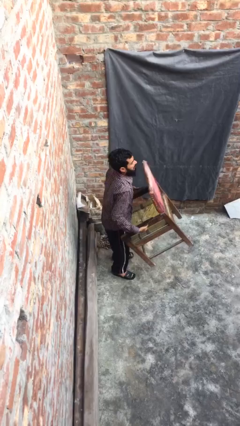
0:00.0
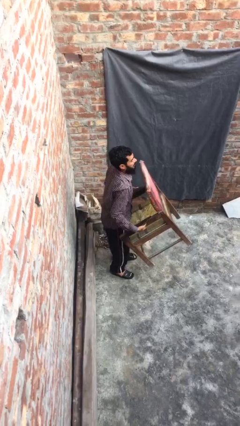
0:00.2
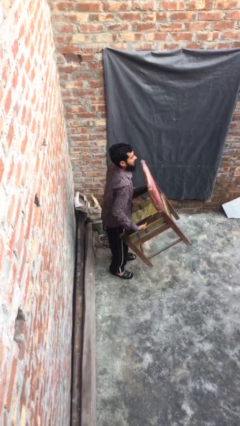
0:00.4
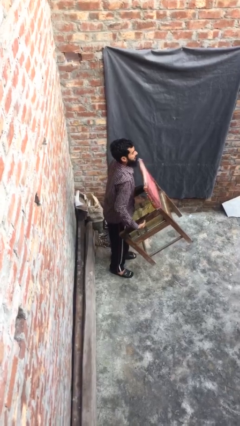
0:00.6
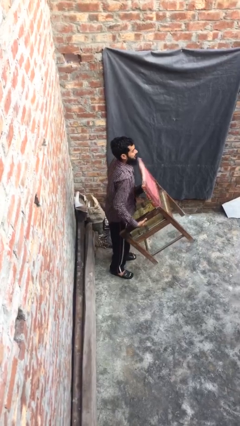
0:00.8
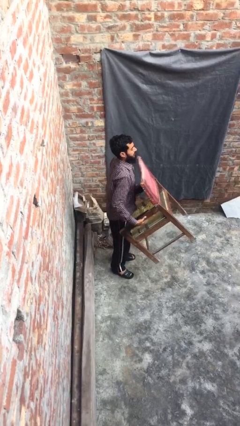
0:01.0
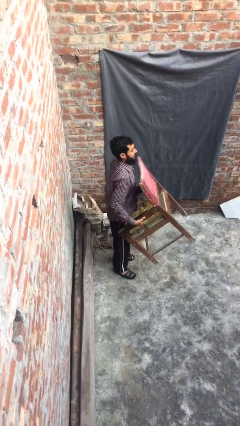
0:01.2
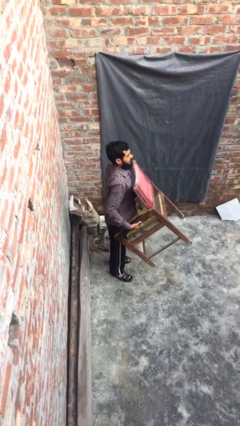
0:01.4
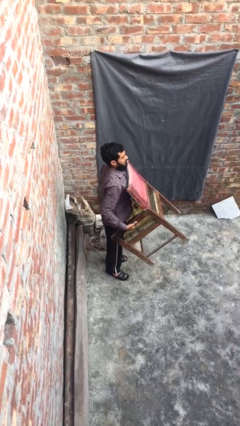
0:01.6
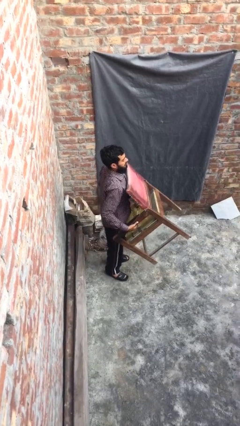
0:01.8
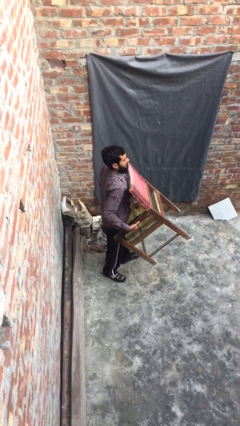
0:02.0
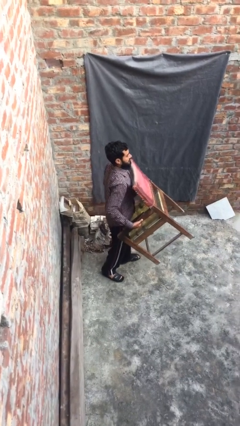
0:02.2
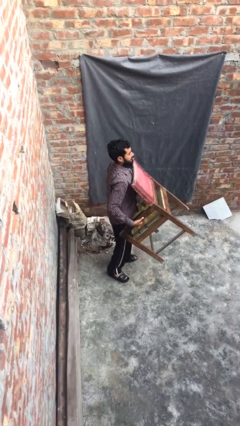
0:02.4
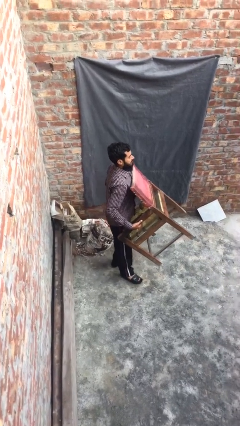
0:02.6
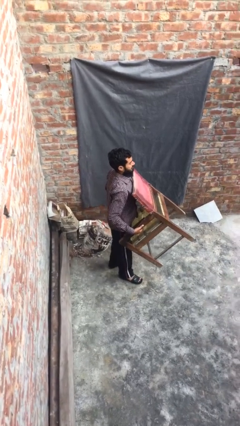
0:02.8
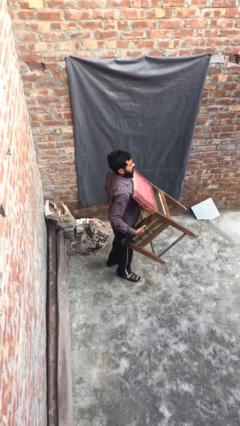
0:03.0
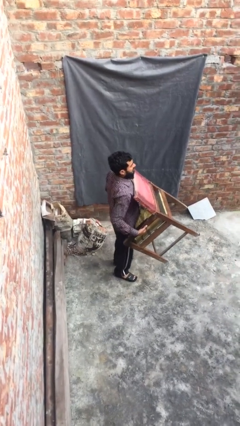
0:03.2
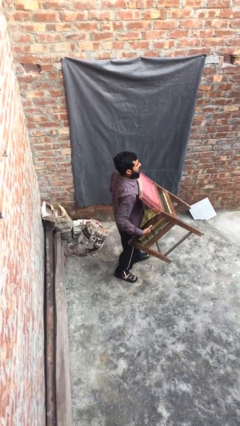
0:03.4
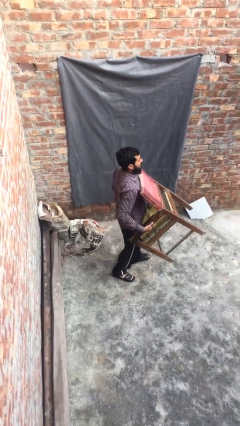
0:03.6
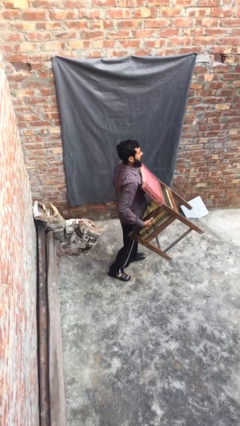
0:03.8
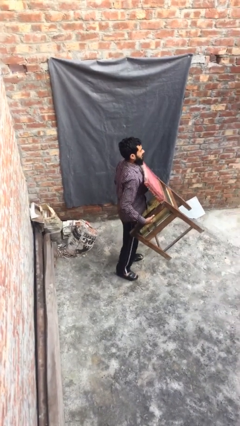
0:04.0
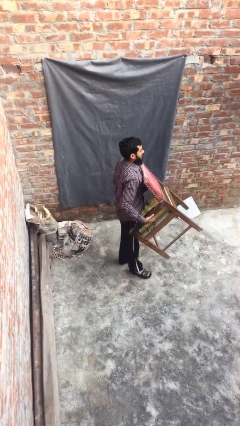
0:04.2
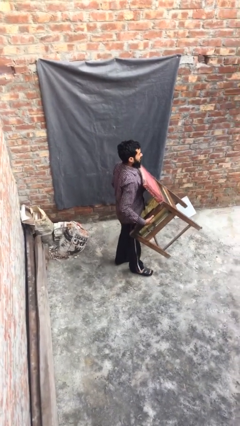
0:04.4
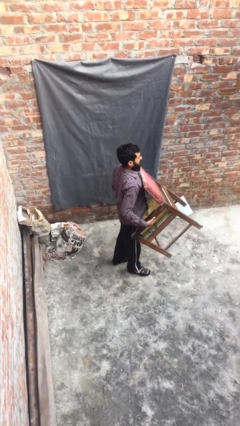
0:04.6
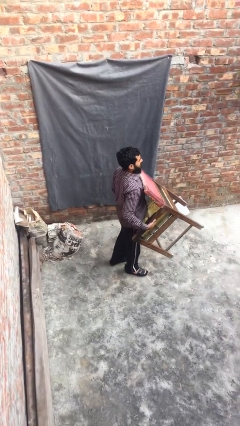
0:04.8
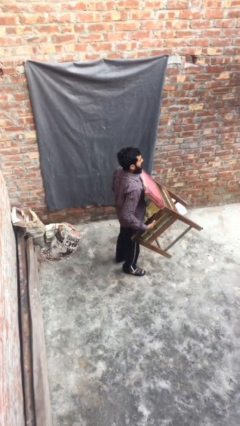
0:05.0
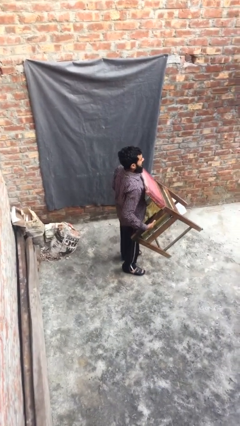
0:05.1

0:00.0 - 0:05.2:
person carries heavy object

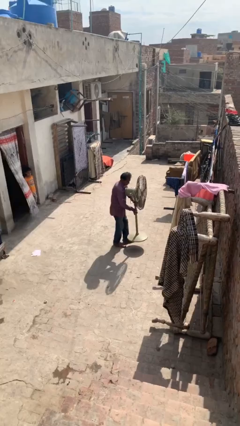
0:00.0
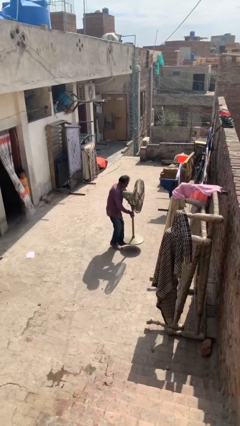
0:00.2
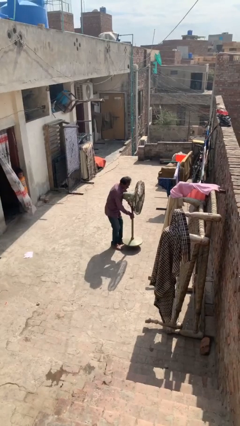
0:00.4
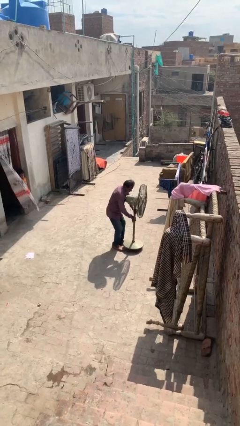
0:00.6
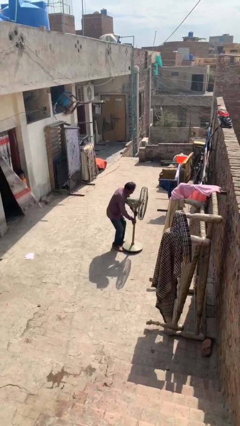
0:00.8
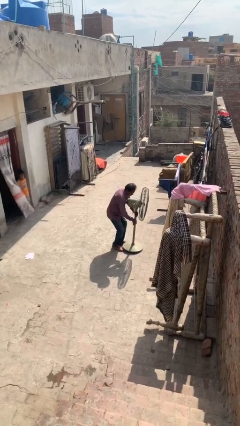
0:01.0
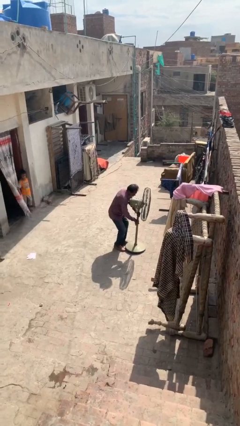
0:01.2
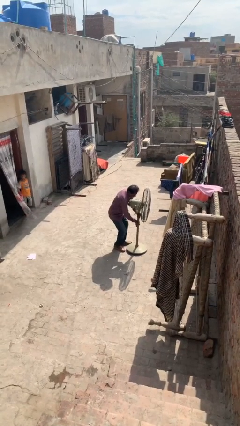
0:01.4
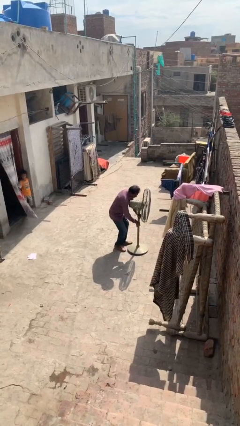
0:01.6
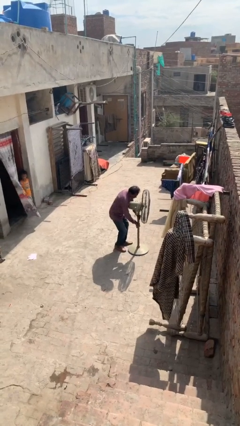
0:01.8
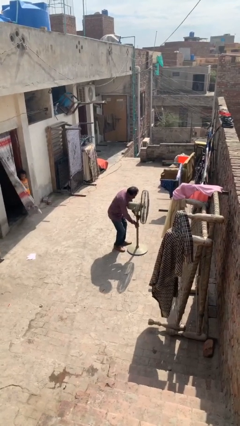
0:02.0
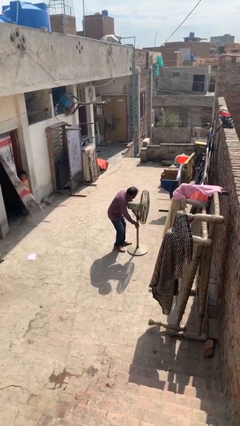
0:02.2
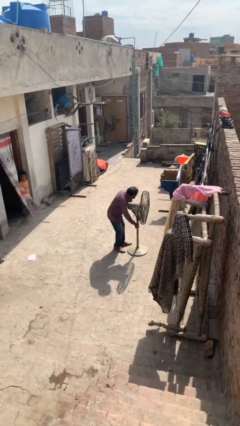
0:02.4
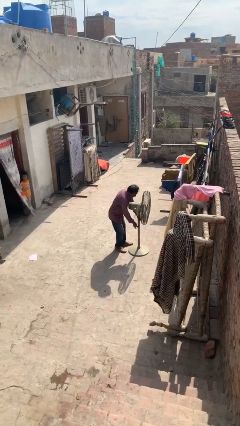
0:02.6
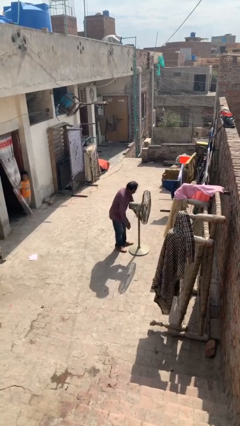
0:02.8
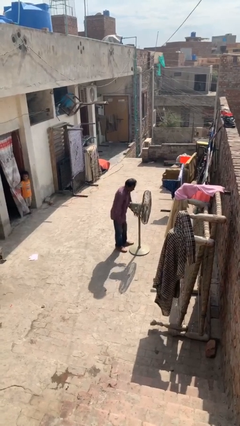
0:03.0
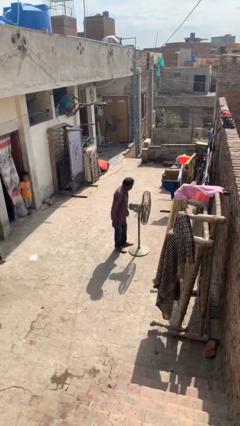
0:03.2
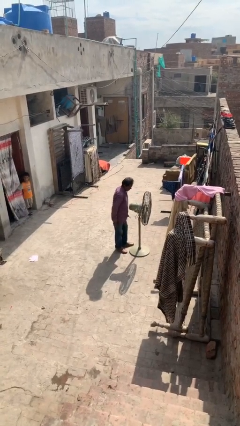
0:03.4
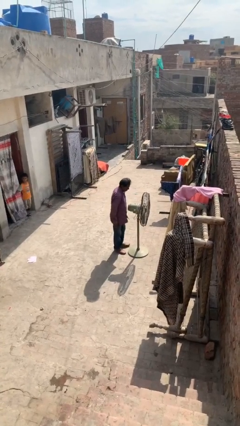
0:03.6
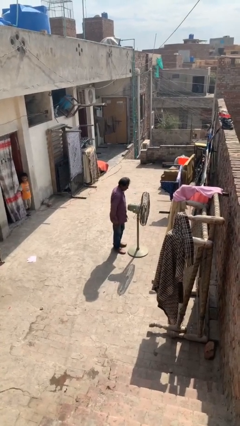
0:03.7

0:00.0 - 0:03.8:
person puts down object on floor

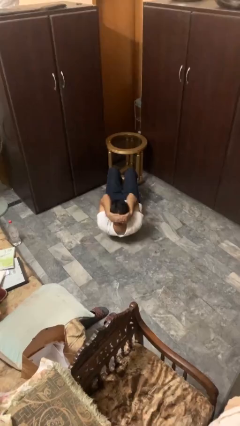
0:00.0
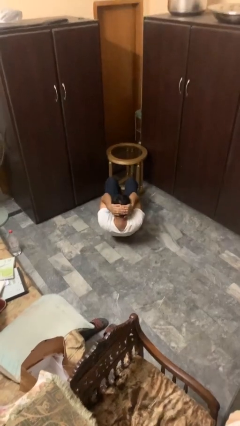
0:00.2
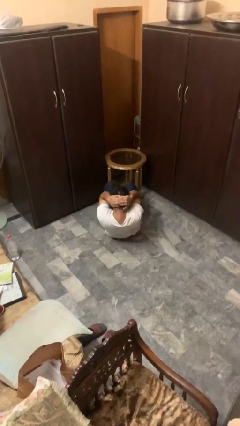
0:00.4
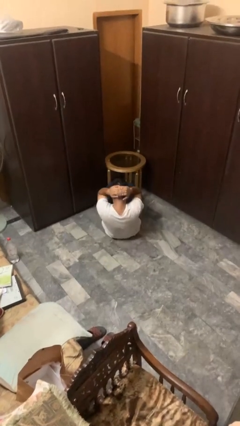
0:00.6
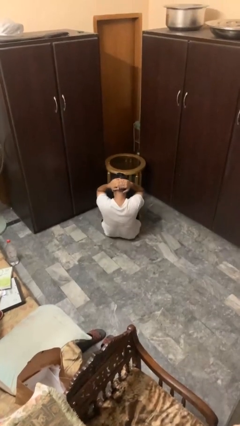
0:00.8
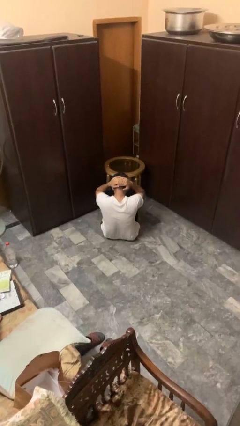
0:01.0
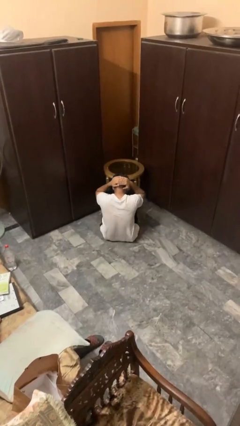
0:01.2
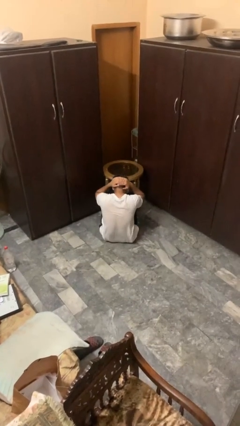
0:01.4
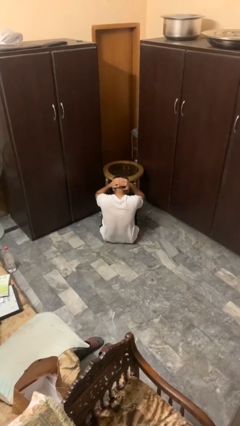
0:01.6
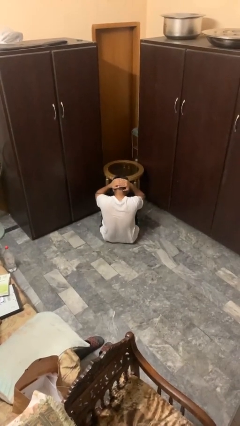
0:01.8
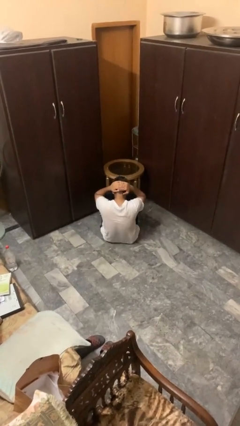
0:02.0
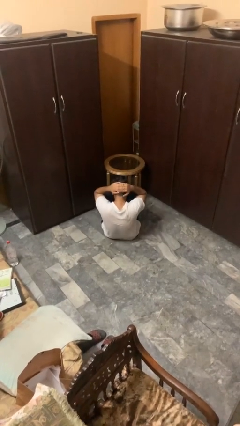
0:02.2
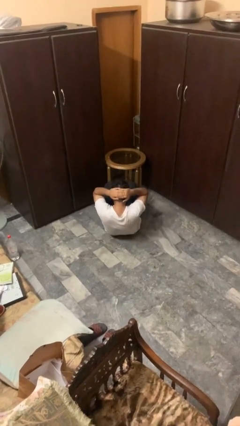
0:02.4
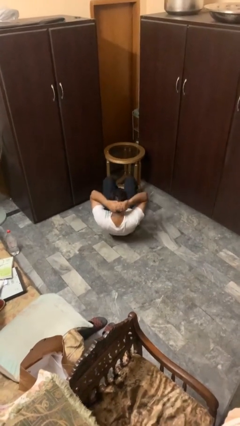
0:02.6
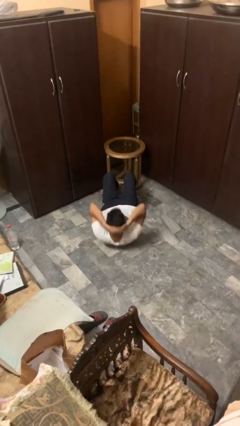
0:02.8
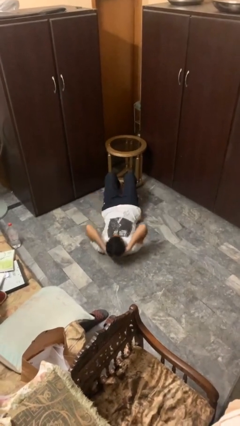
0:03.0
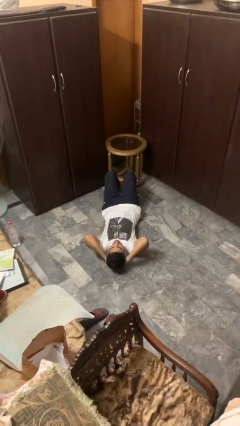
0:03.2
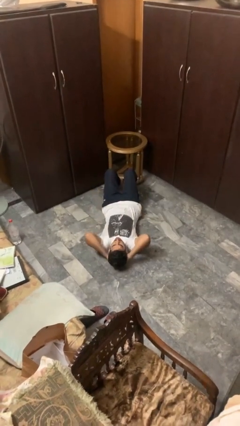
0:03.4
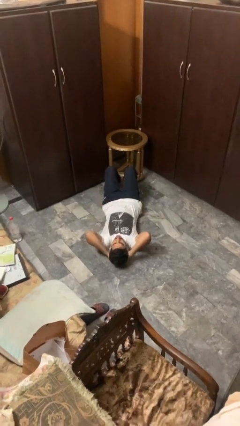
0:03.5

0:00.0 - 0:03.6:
person exercises with situp

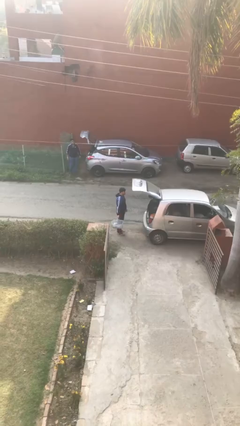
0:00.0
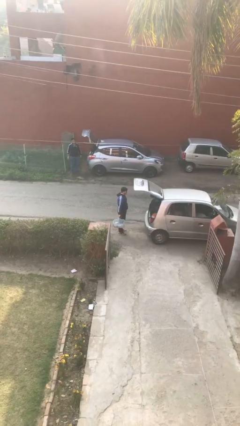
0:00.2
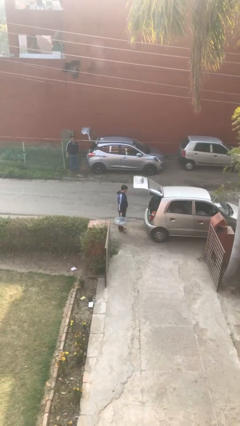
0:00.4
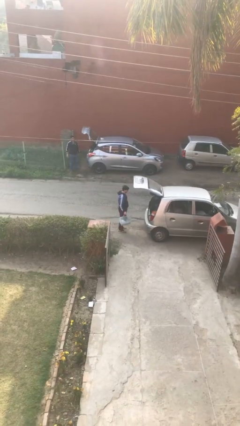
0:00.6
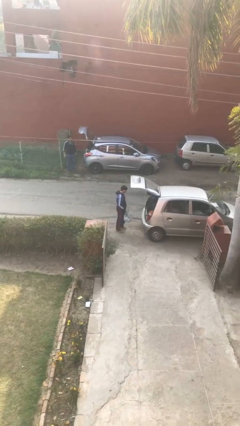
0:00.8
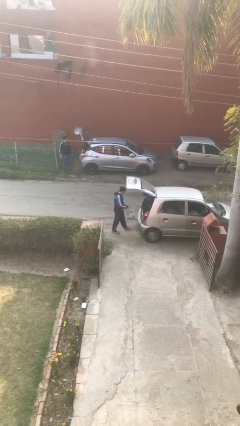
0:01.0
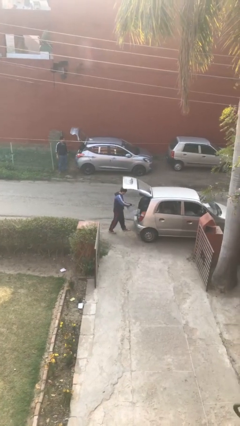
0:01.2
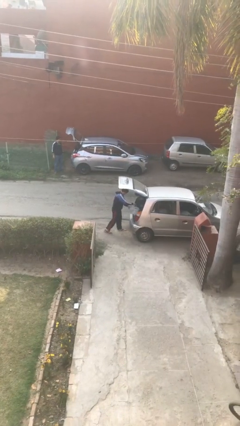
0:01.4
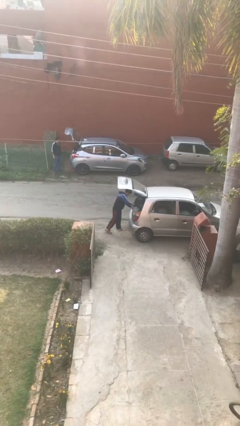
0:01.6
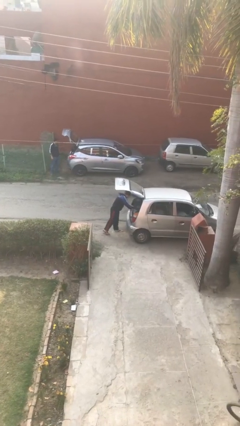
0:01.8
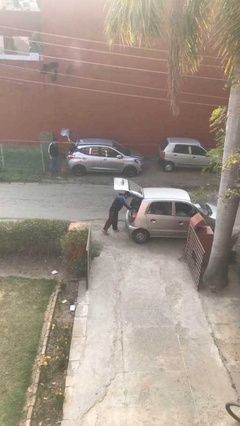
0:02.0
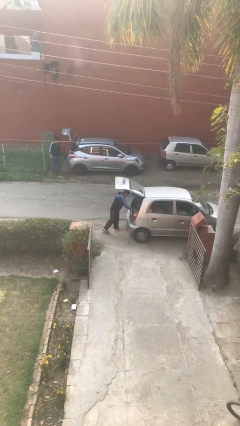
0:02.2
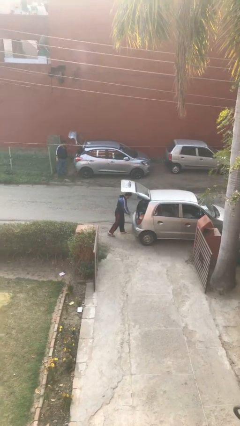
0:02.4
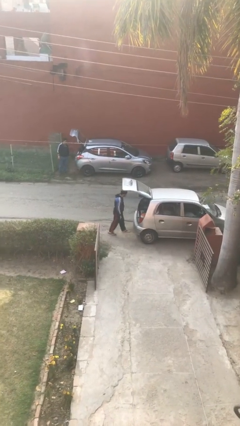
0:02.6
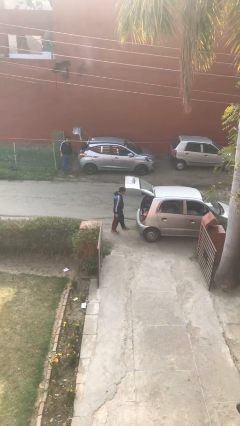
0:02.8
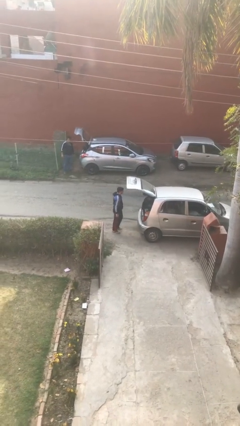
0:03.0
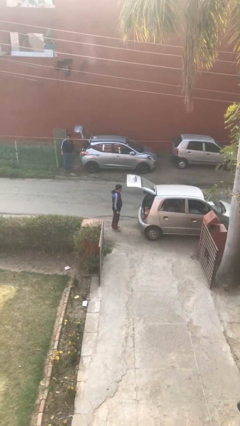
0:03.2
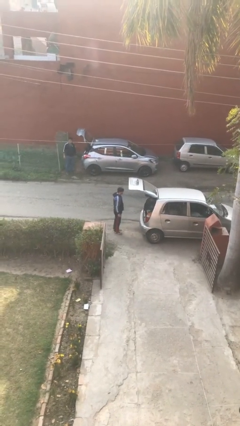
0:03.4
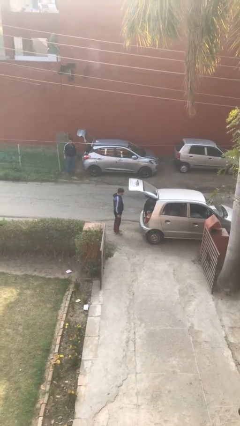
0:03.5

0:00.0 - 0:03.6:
person loads car

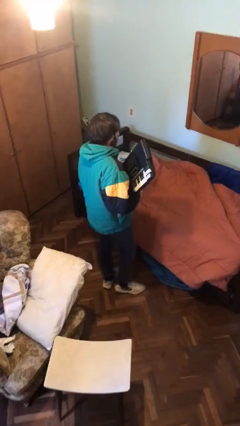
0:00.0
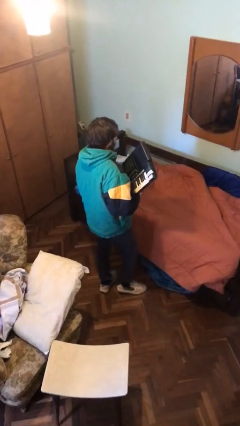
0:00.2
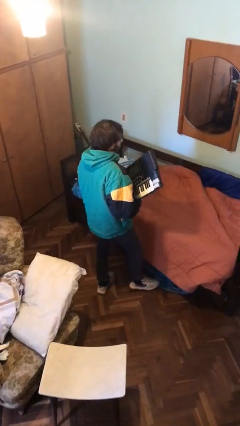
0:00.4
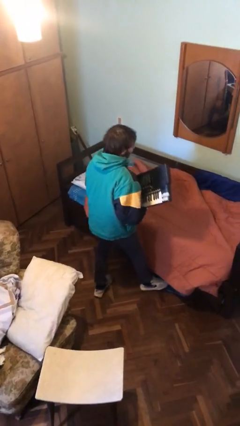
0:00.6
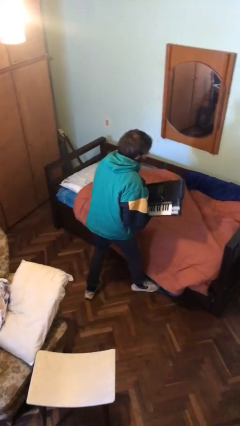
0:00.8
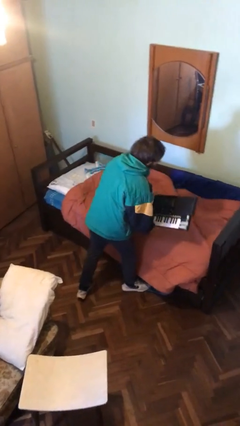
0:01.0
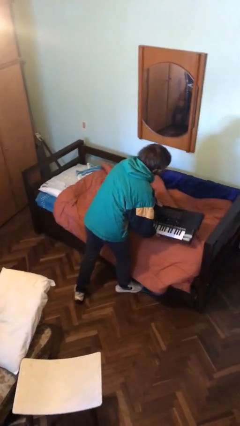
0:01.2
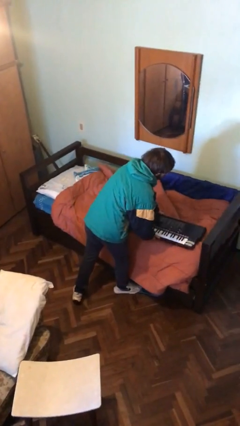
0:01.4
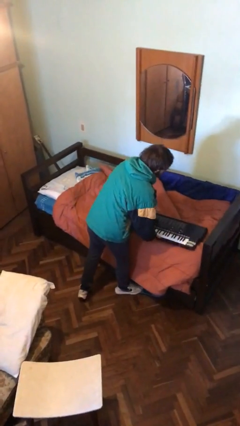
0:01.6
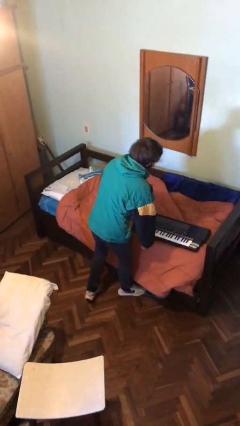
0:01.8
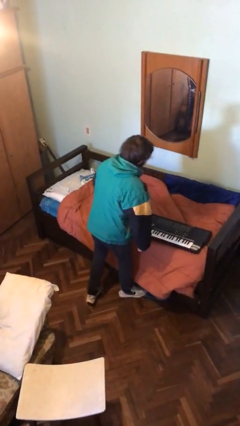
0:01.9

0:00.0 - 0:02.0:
person puts down object on bed
